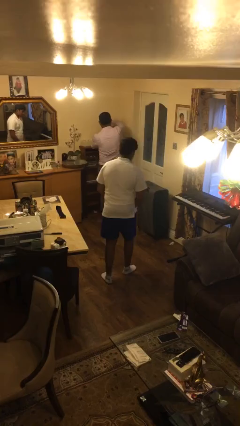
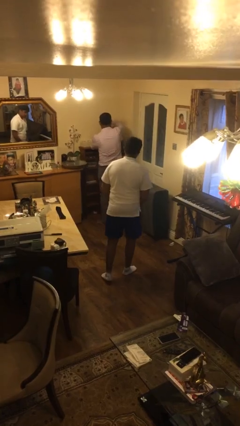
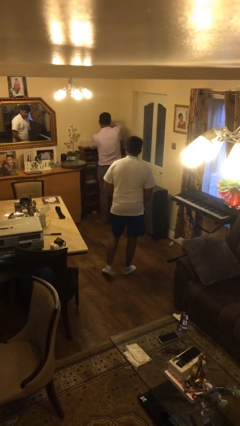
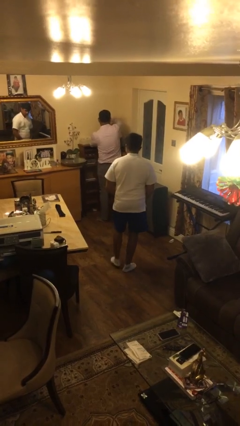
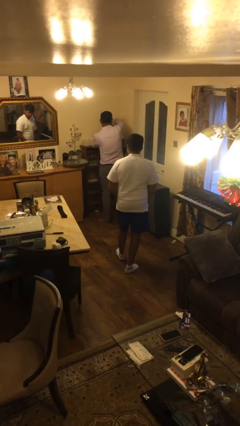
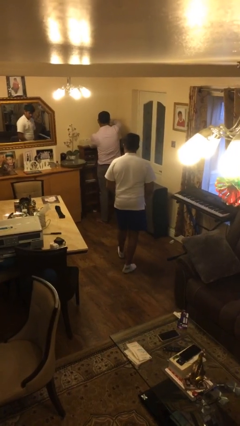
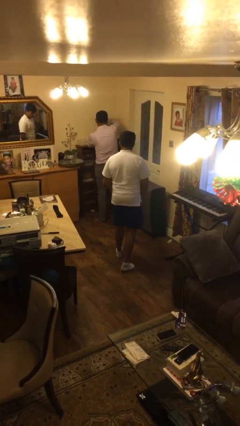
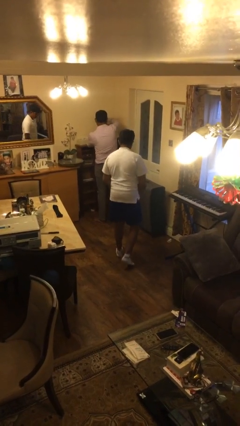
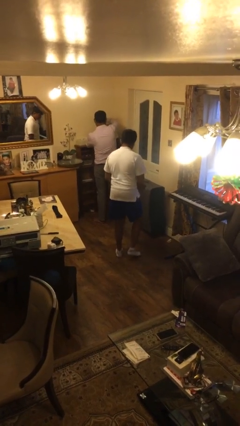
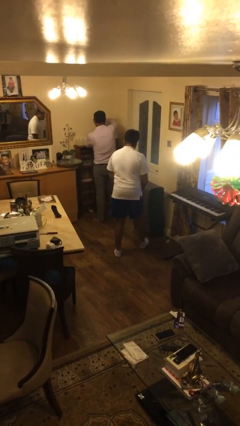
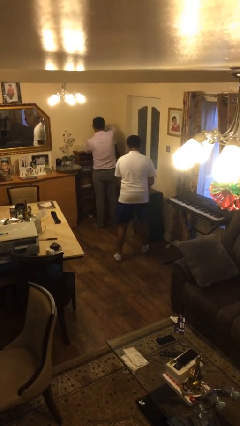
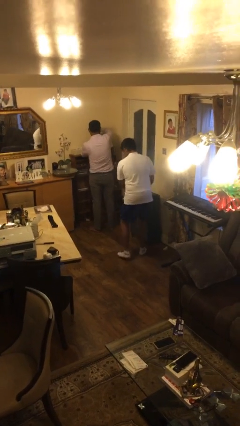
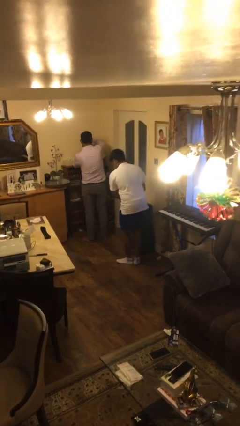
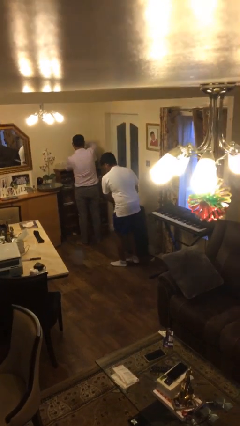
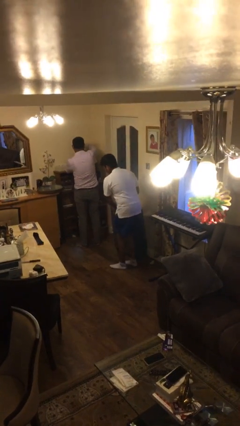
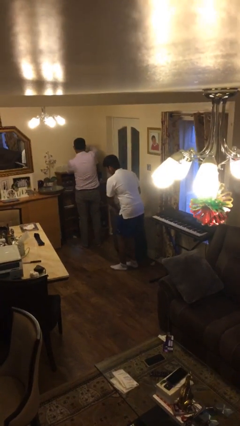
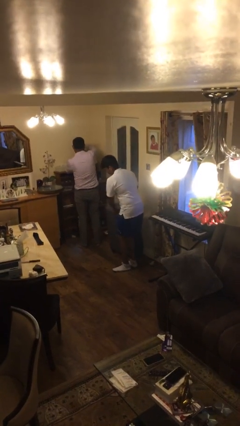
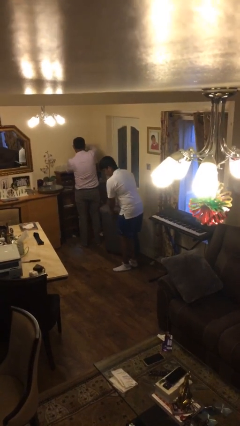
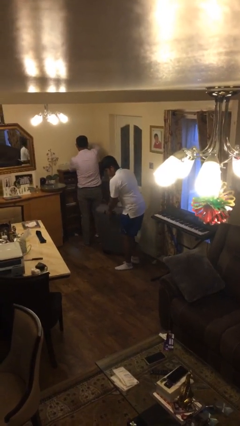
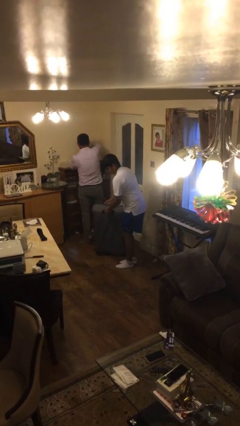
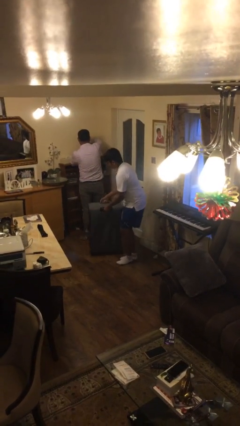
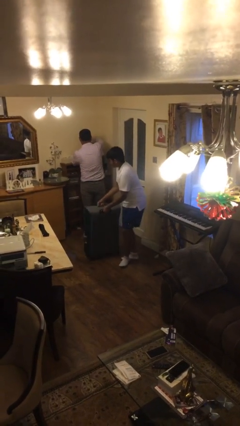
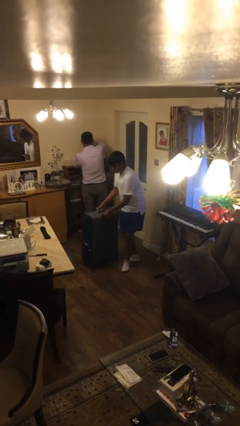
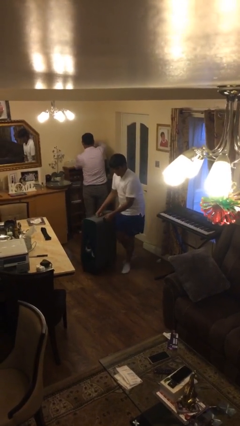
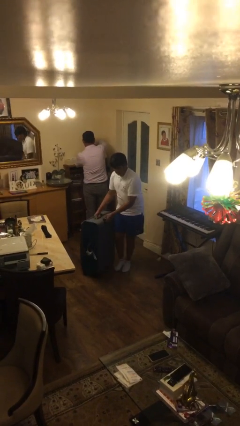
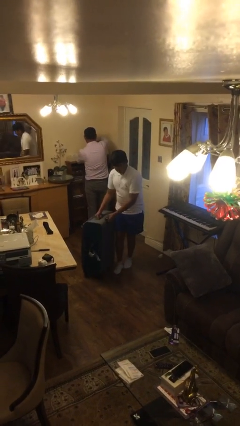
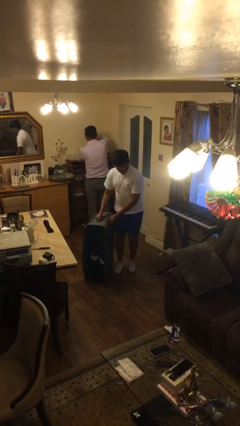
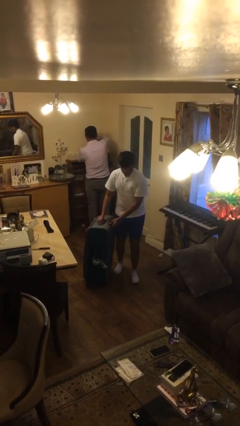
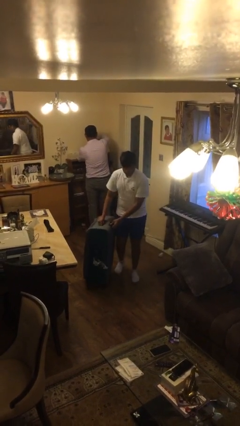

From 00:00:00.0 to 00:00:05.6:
person steals object from person

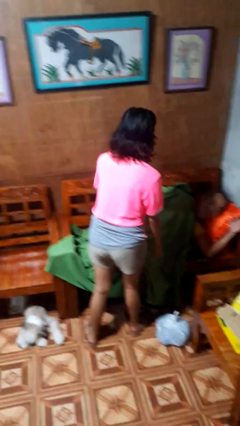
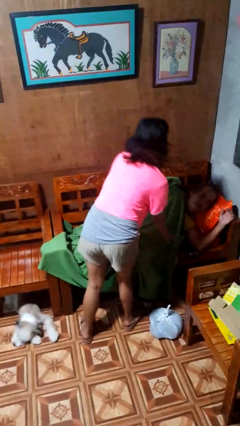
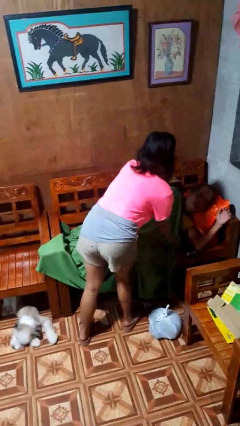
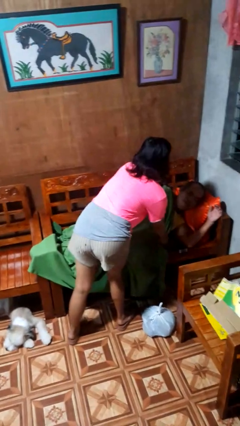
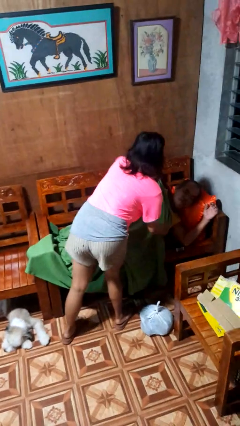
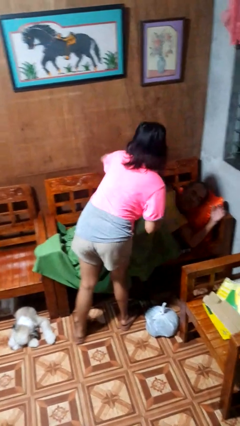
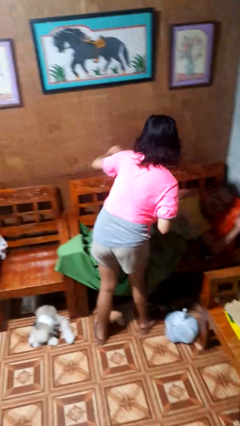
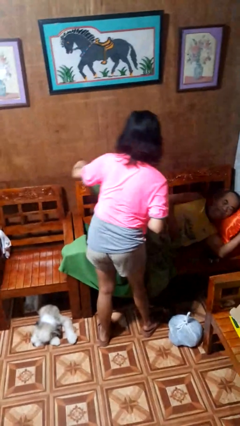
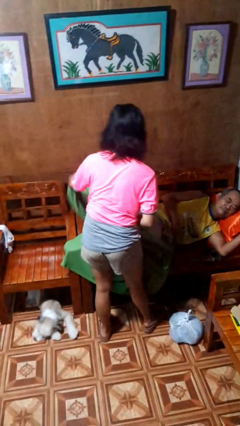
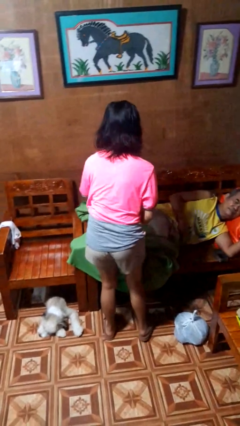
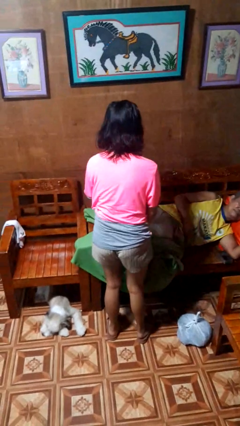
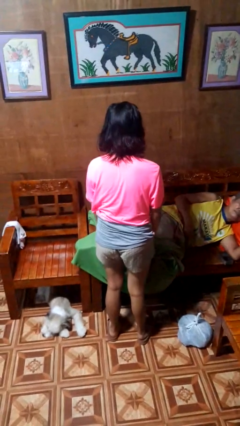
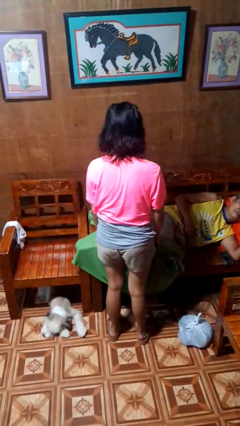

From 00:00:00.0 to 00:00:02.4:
person uncovers friend with blanket

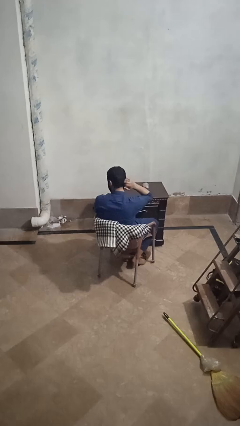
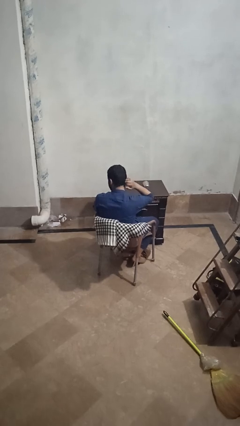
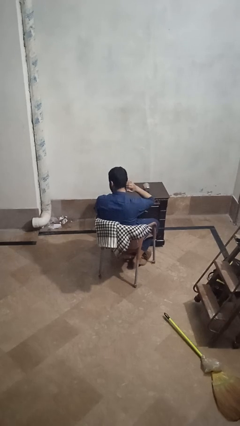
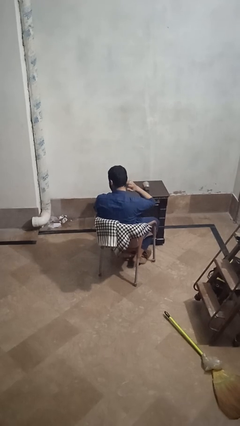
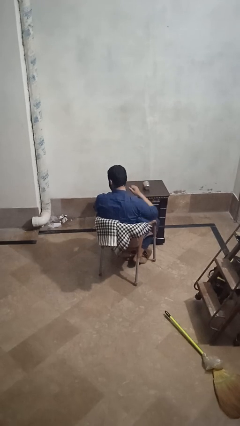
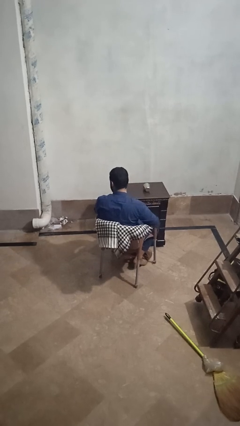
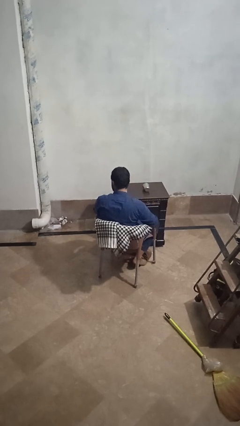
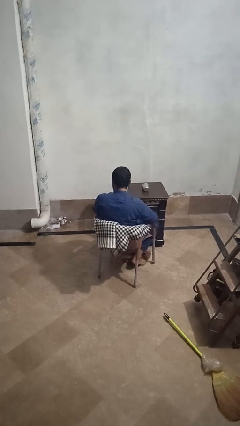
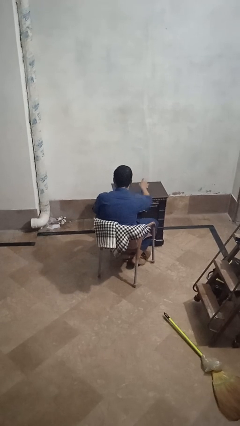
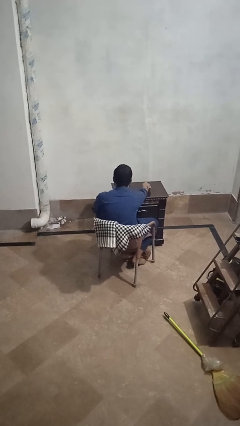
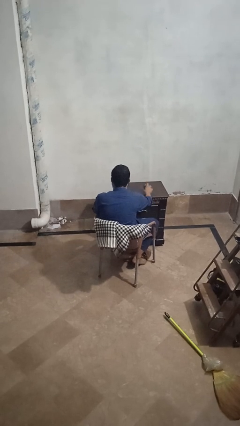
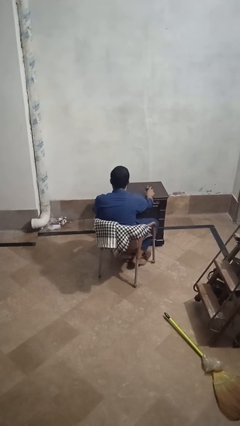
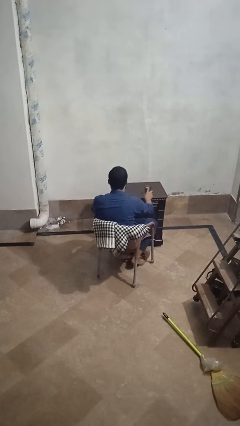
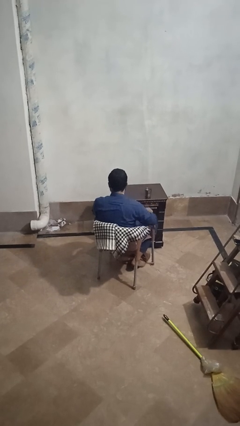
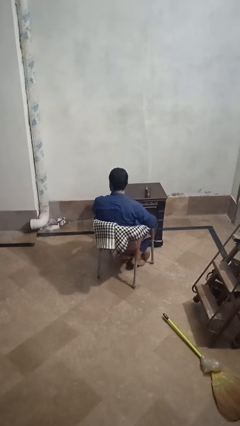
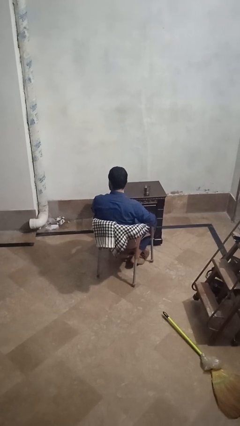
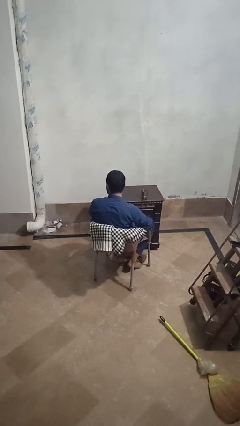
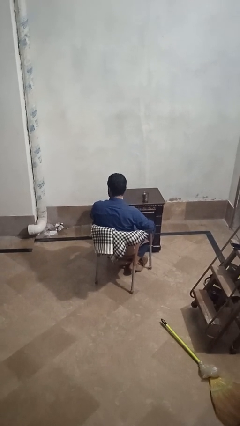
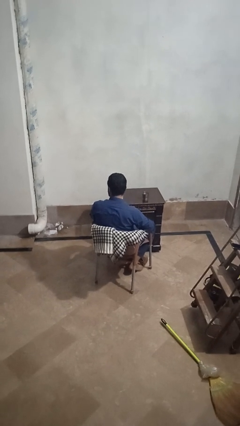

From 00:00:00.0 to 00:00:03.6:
person sets upright glass

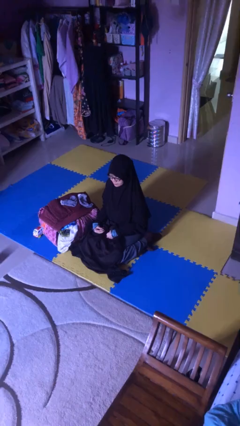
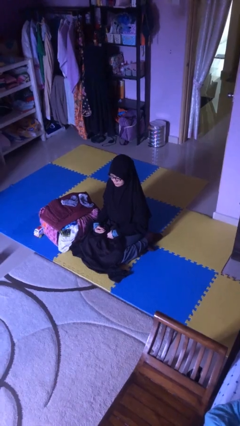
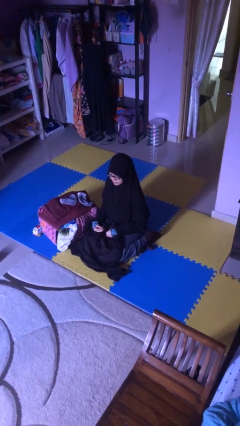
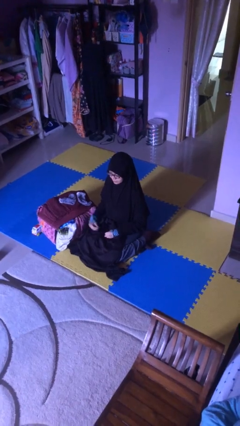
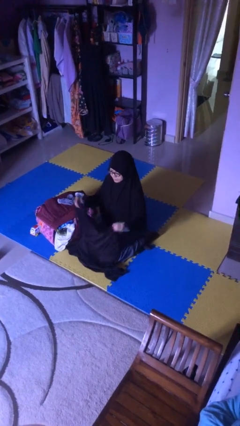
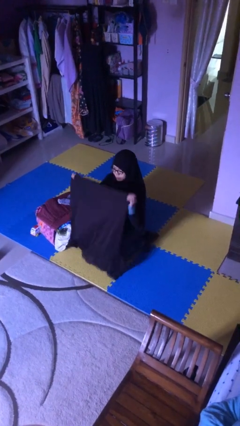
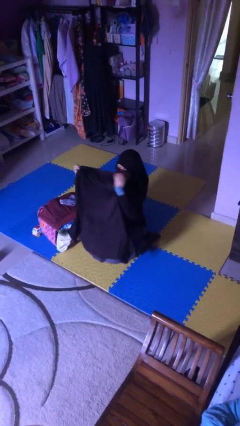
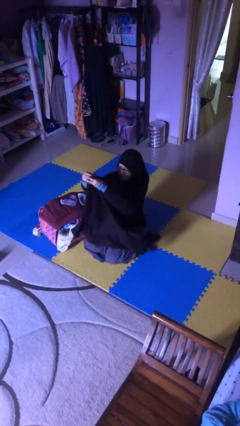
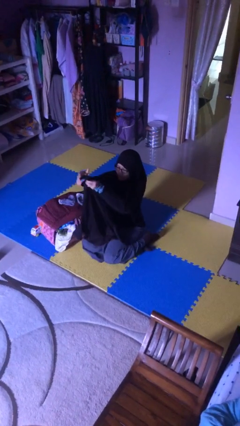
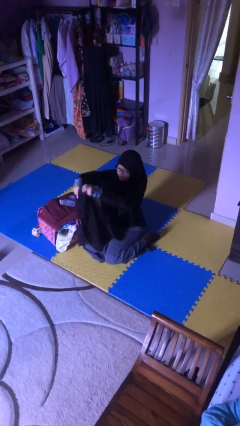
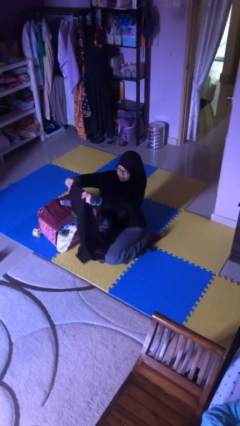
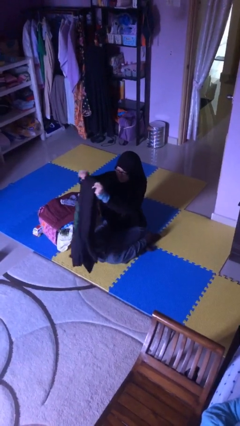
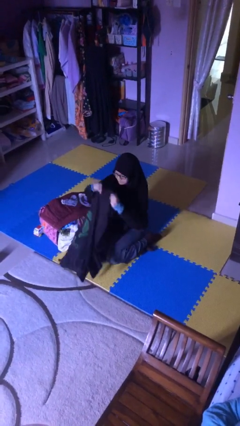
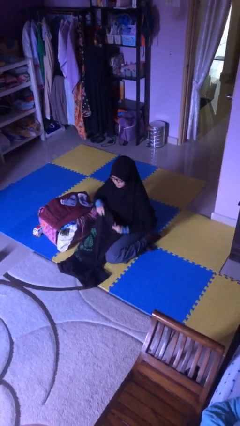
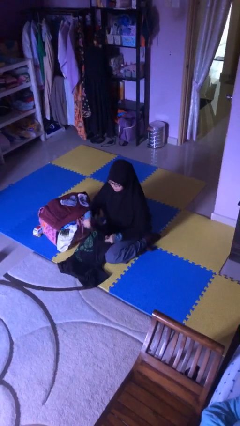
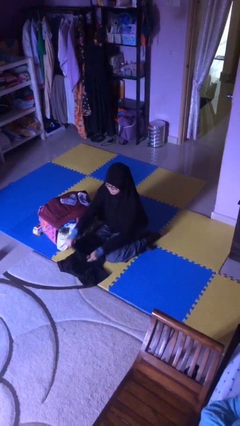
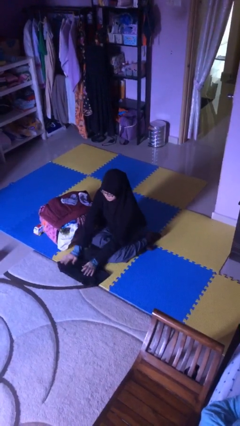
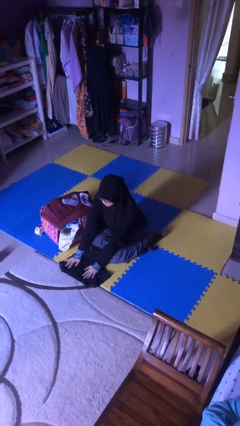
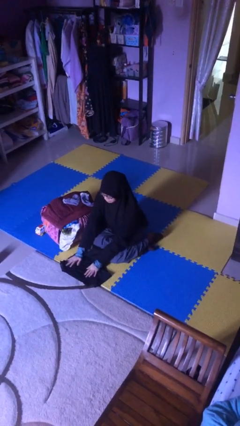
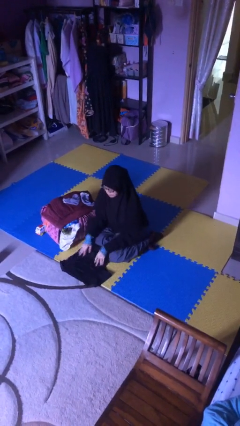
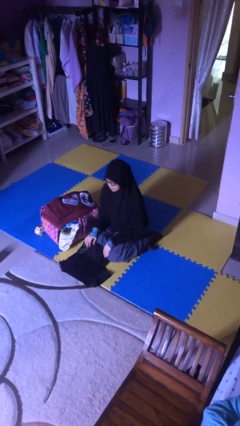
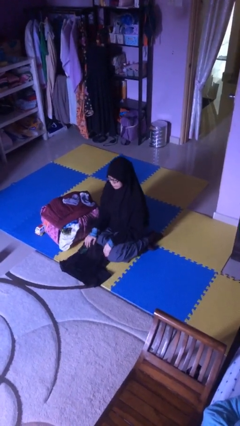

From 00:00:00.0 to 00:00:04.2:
person folds shirt

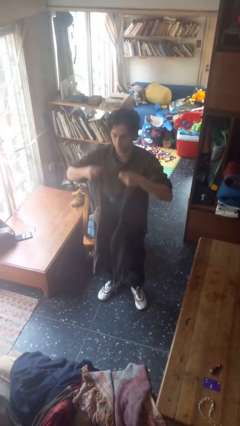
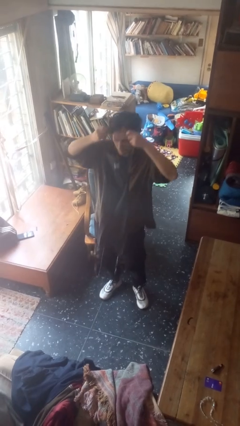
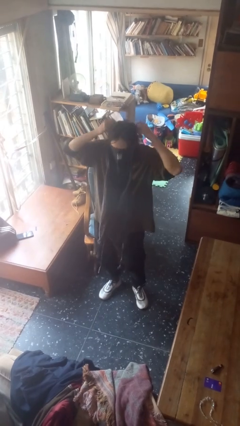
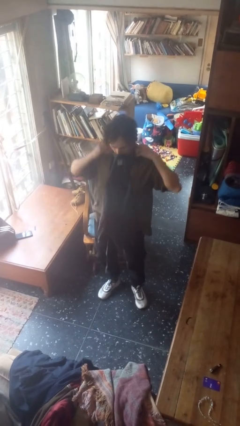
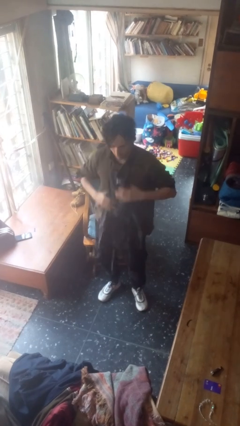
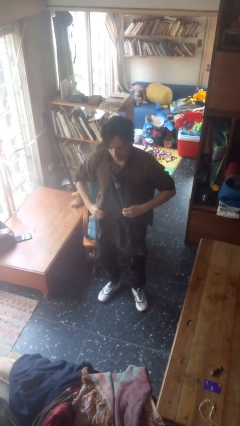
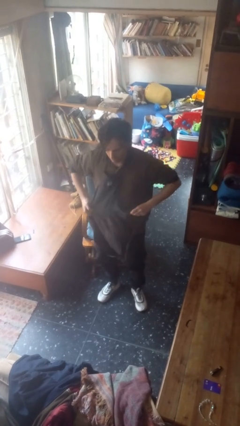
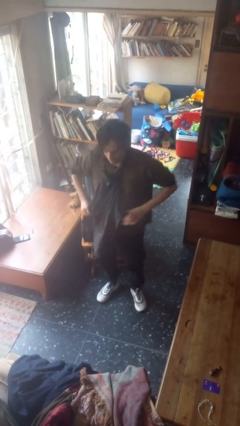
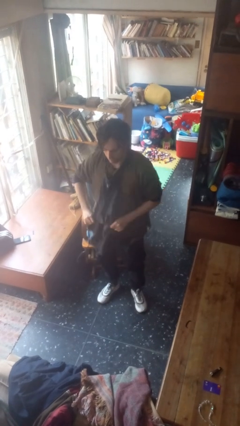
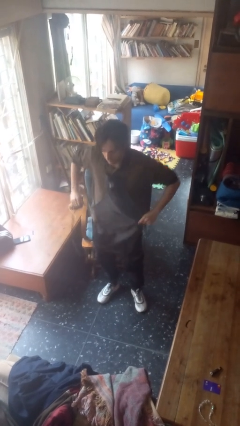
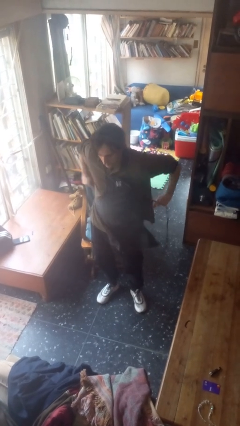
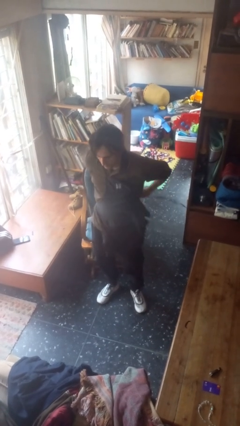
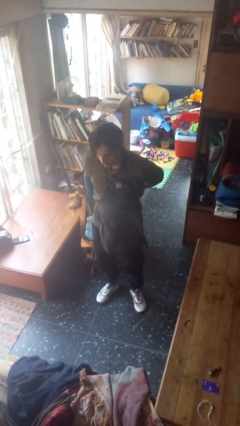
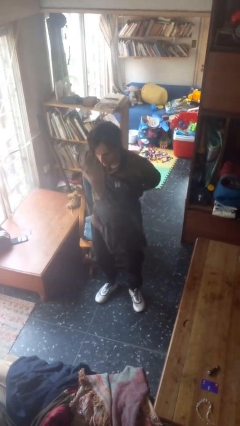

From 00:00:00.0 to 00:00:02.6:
person puts on apron
